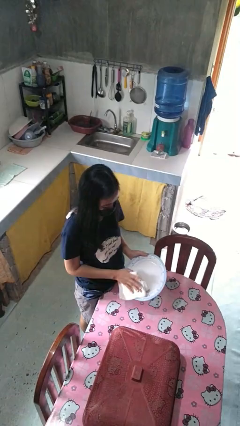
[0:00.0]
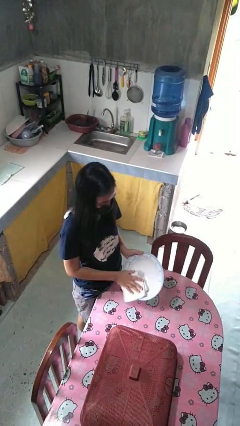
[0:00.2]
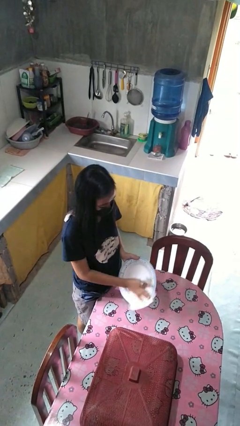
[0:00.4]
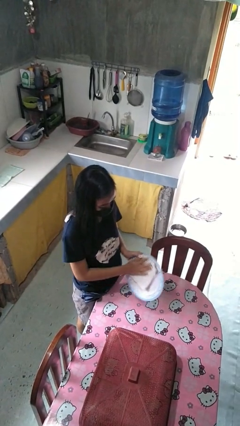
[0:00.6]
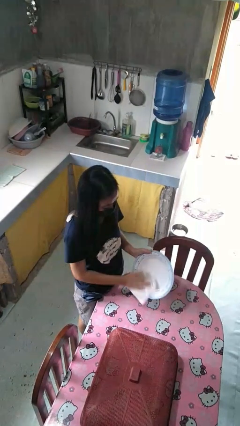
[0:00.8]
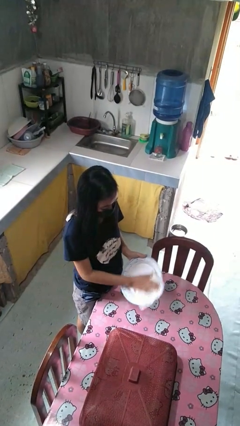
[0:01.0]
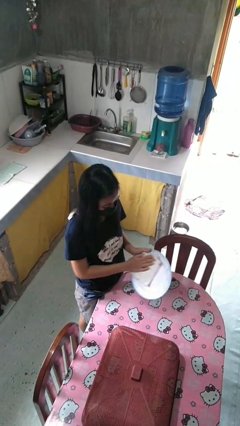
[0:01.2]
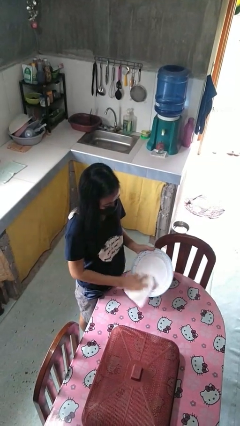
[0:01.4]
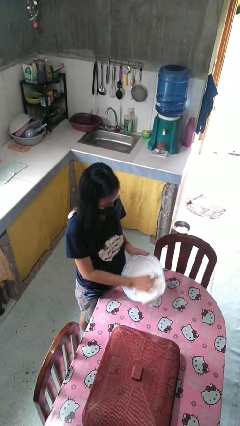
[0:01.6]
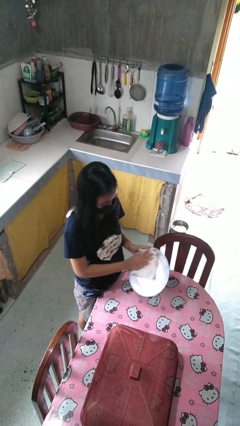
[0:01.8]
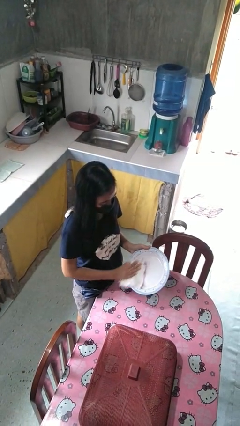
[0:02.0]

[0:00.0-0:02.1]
person dries dish

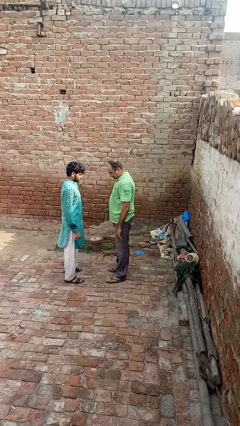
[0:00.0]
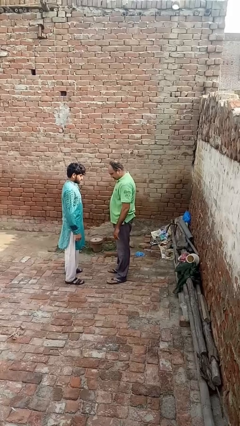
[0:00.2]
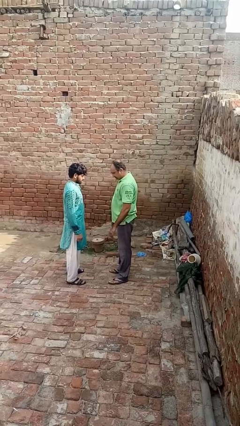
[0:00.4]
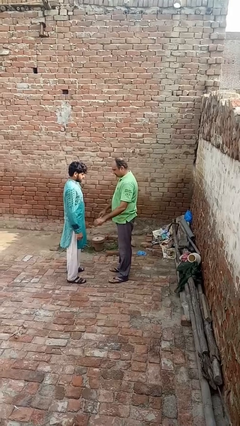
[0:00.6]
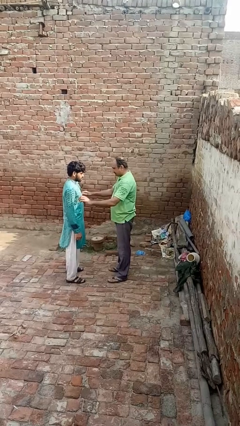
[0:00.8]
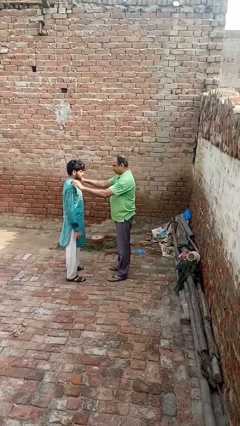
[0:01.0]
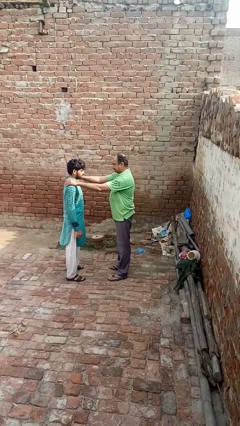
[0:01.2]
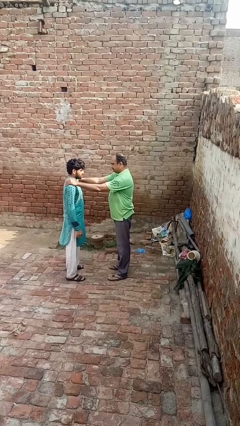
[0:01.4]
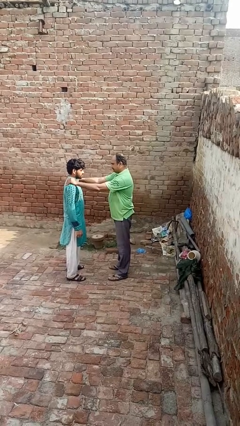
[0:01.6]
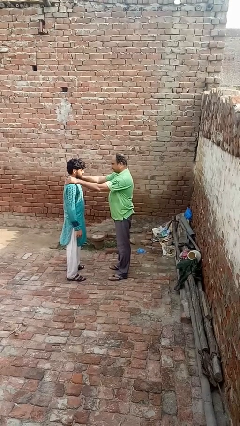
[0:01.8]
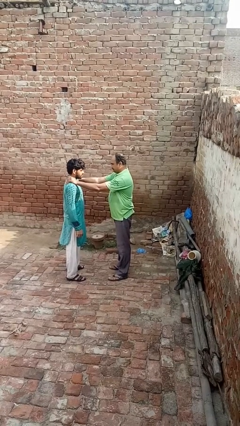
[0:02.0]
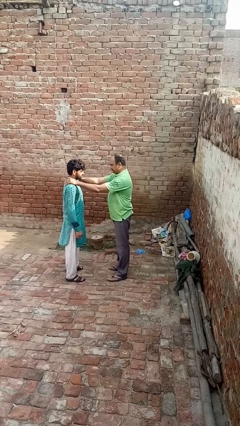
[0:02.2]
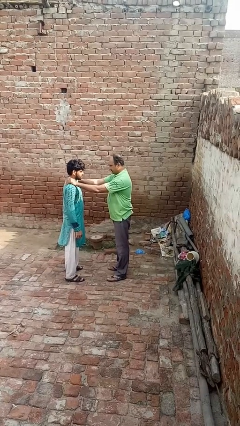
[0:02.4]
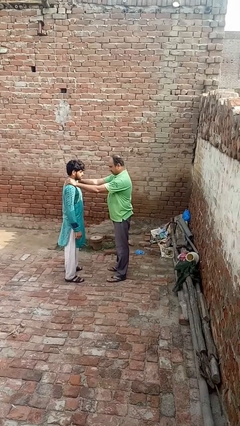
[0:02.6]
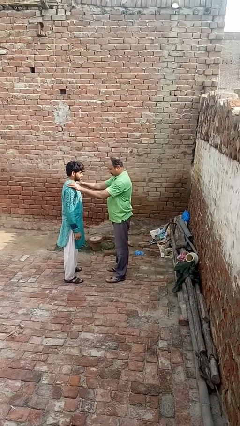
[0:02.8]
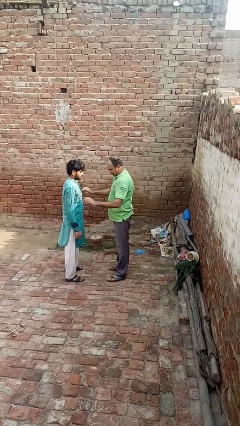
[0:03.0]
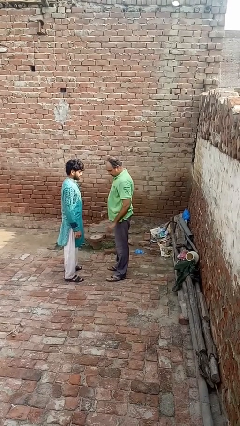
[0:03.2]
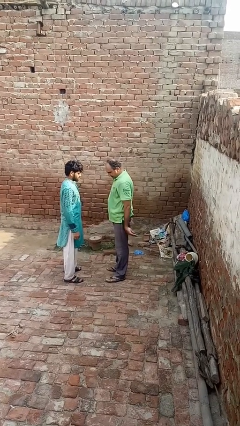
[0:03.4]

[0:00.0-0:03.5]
person pounds shoulders of person

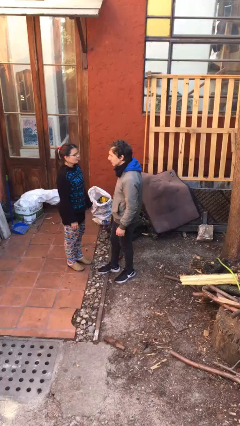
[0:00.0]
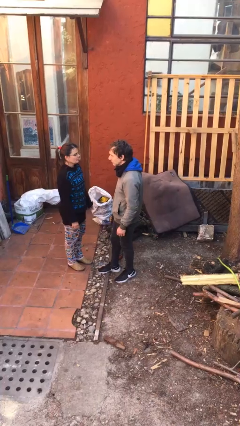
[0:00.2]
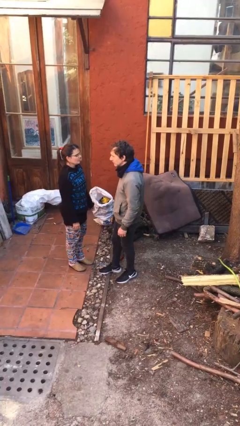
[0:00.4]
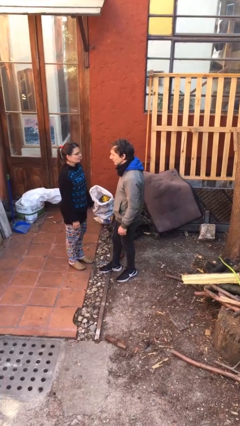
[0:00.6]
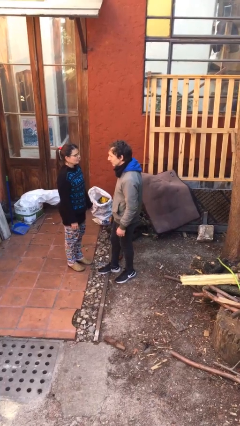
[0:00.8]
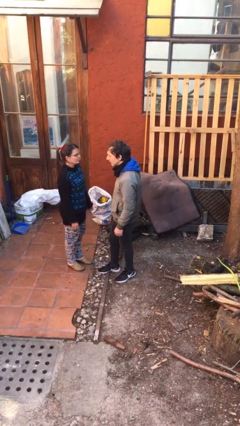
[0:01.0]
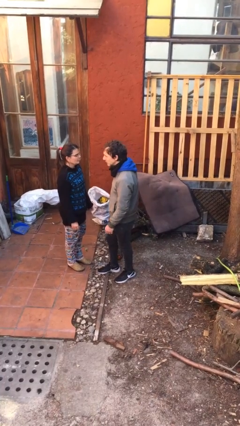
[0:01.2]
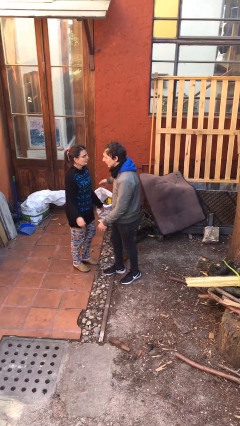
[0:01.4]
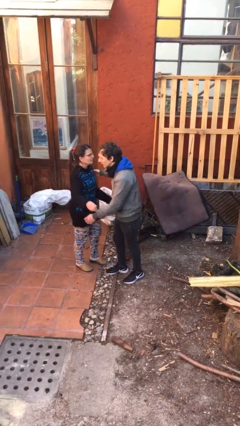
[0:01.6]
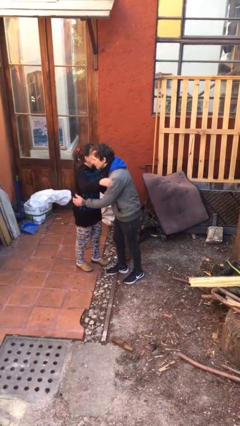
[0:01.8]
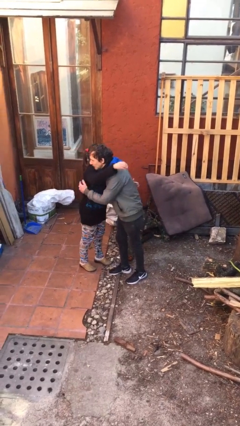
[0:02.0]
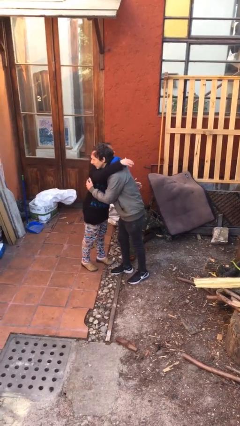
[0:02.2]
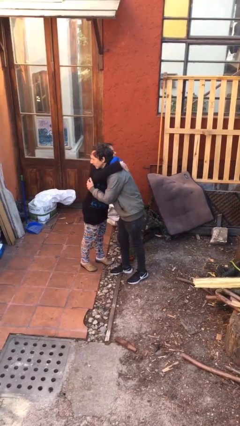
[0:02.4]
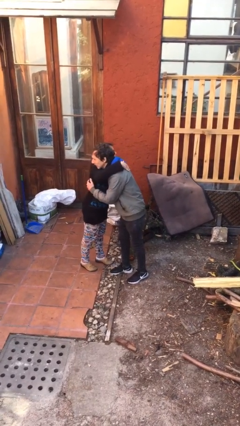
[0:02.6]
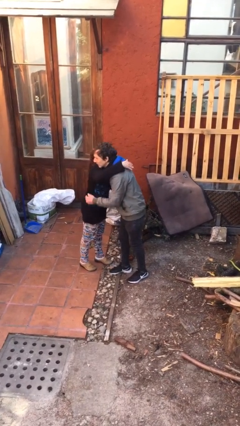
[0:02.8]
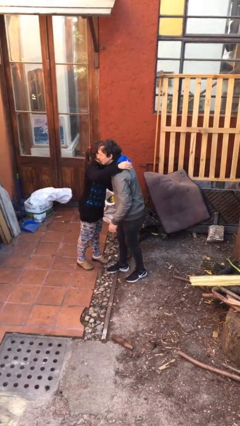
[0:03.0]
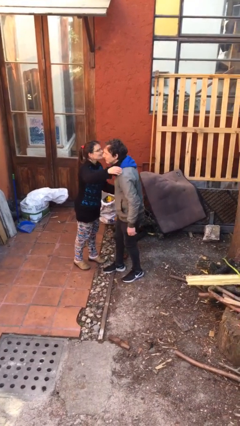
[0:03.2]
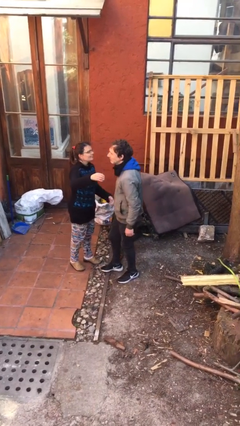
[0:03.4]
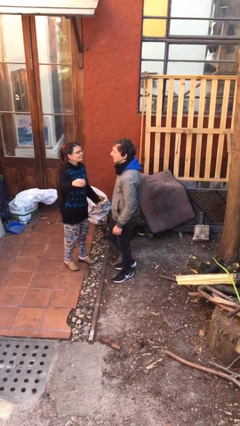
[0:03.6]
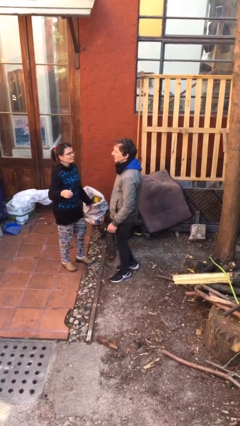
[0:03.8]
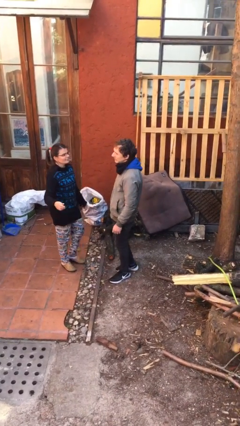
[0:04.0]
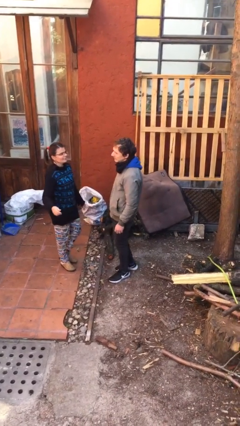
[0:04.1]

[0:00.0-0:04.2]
person embraces person

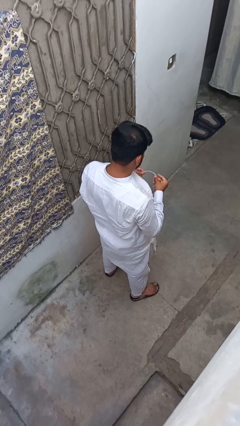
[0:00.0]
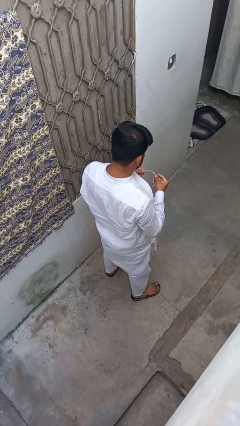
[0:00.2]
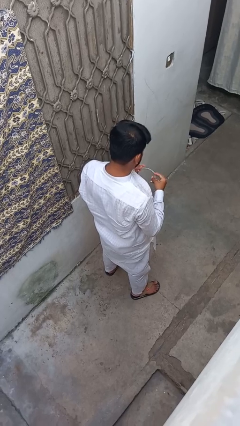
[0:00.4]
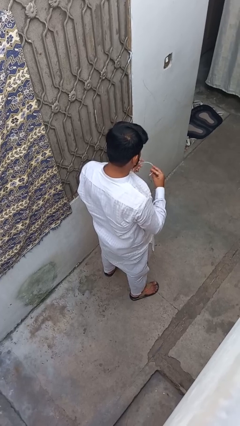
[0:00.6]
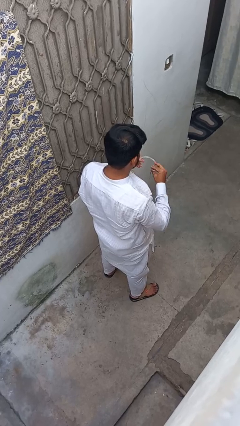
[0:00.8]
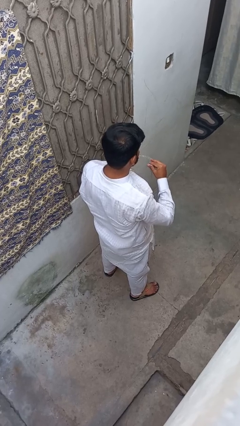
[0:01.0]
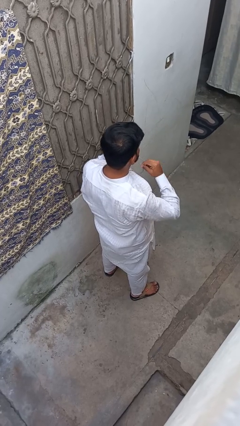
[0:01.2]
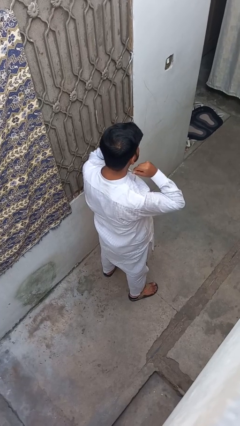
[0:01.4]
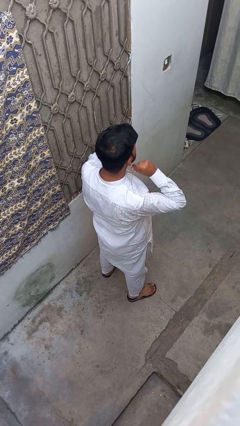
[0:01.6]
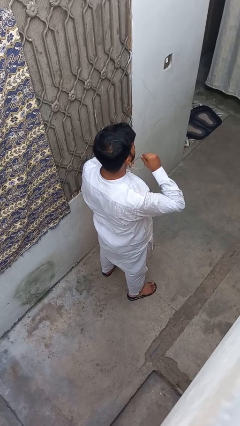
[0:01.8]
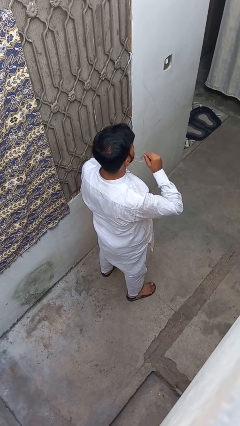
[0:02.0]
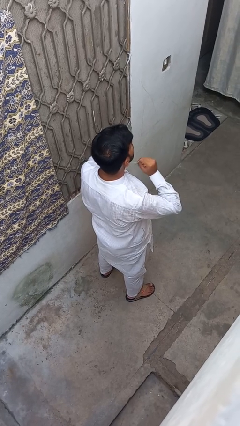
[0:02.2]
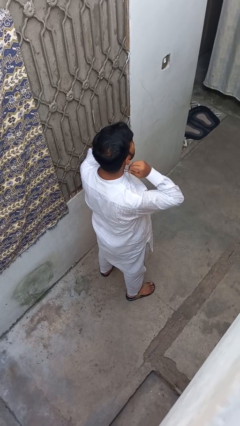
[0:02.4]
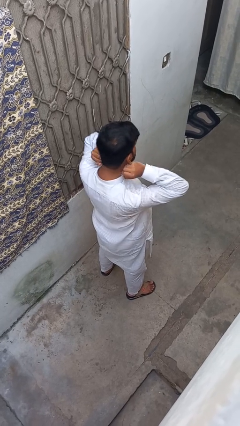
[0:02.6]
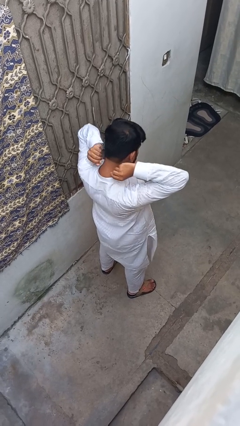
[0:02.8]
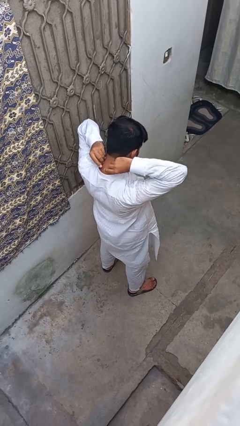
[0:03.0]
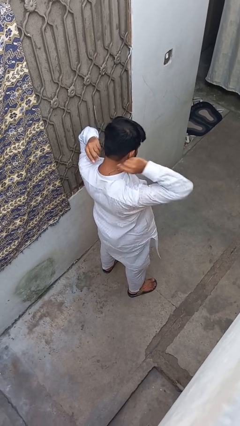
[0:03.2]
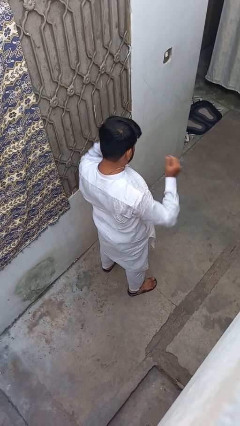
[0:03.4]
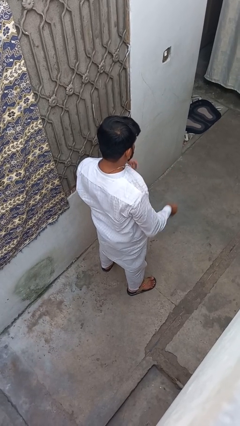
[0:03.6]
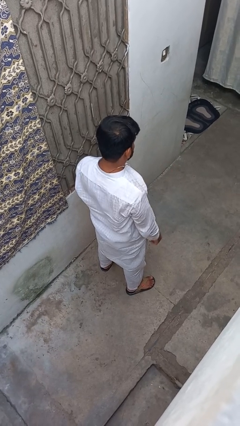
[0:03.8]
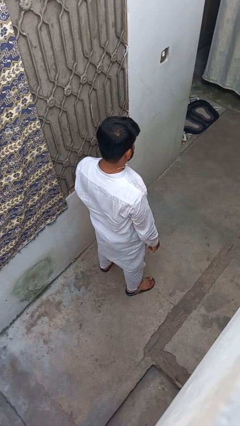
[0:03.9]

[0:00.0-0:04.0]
person puts on necklace

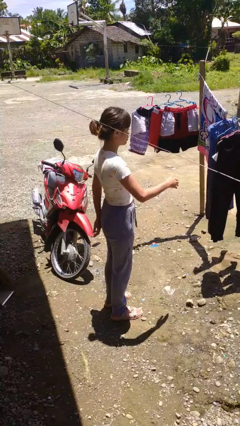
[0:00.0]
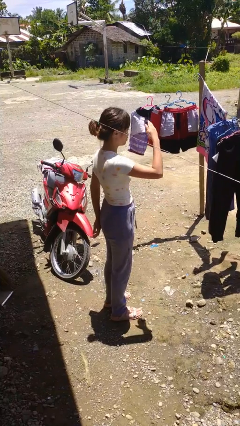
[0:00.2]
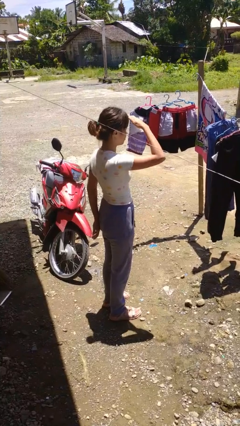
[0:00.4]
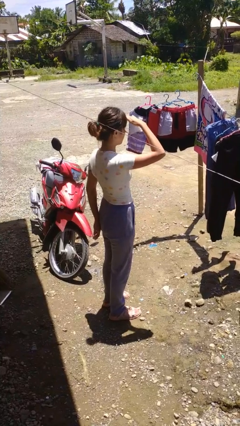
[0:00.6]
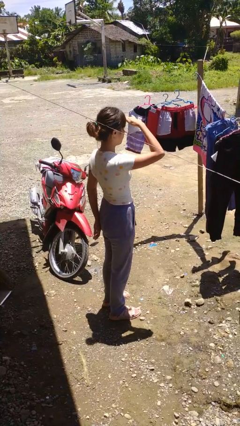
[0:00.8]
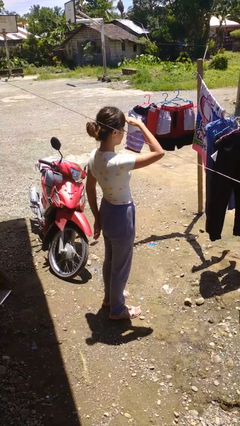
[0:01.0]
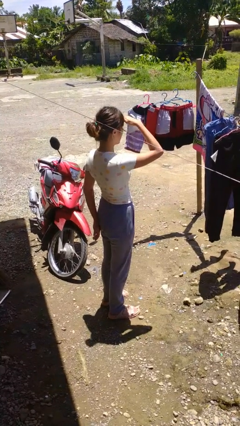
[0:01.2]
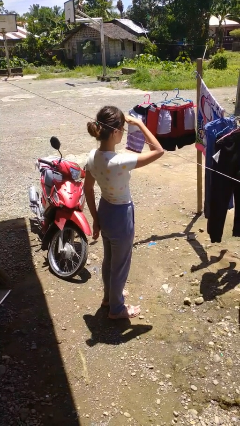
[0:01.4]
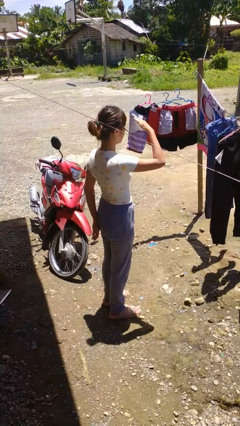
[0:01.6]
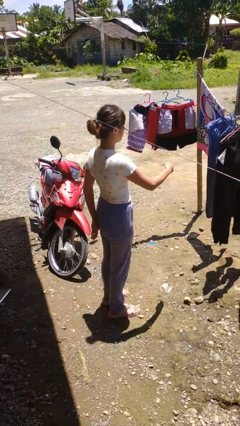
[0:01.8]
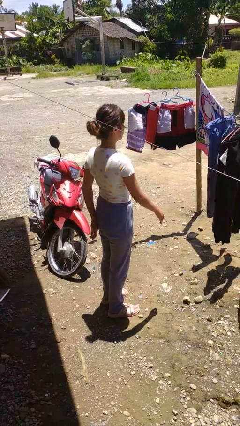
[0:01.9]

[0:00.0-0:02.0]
person shades eyes

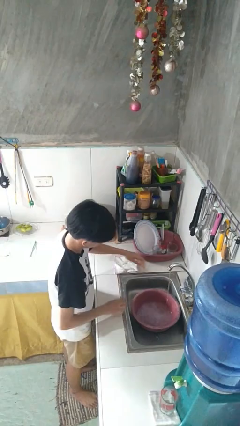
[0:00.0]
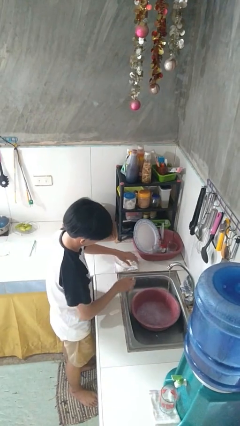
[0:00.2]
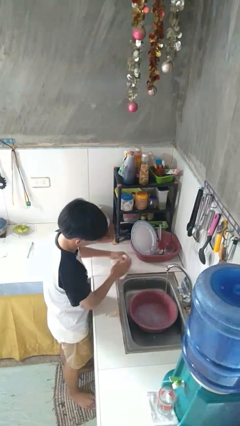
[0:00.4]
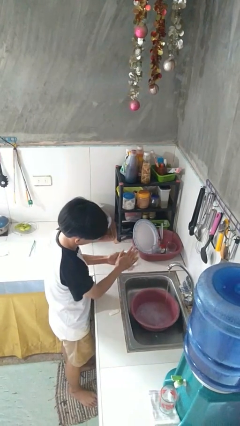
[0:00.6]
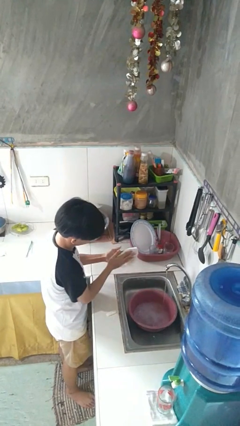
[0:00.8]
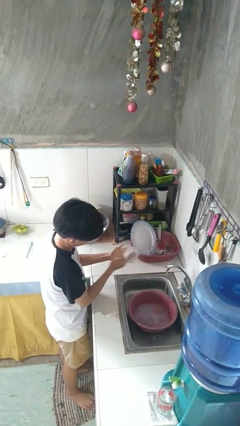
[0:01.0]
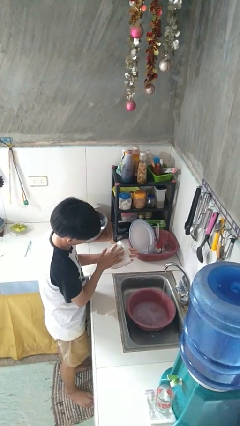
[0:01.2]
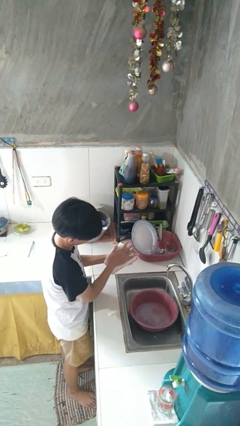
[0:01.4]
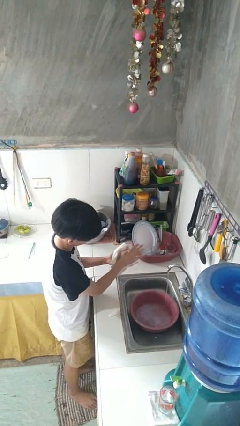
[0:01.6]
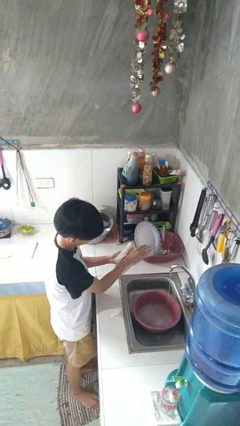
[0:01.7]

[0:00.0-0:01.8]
person dries hands with towel
